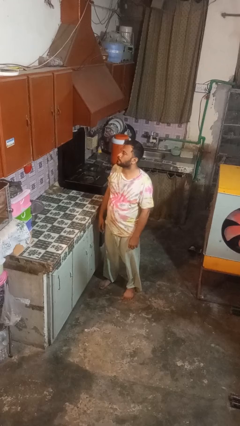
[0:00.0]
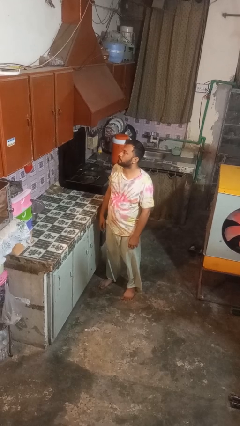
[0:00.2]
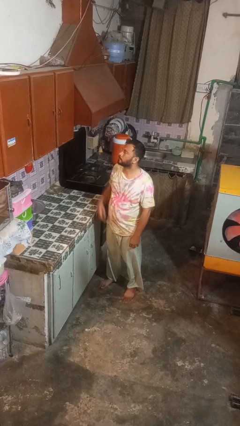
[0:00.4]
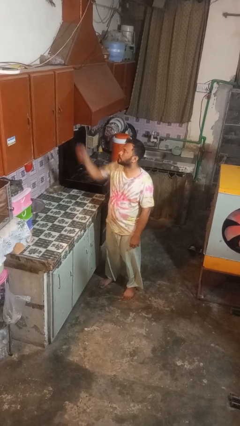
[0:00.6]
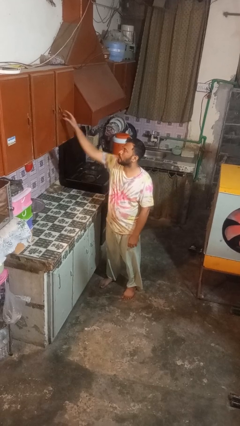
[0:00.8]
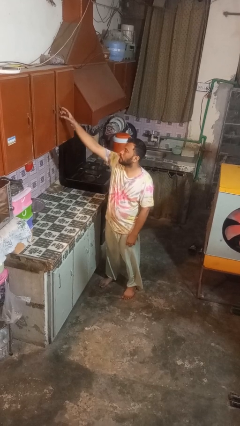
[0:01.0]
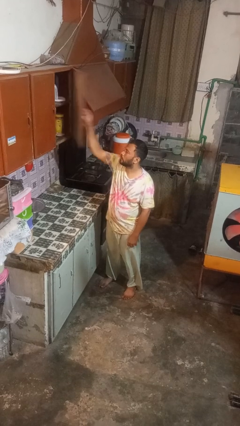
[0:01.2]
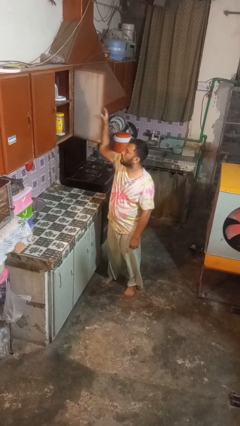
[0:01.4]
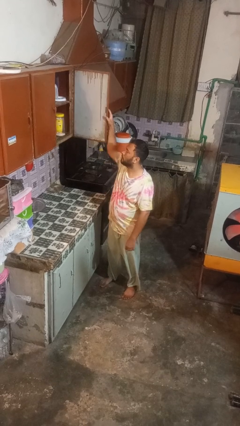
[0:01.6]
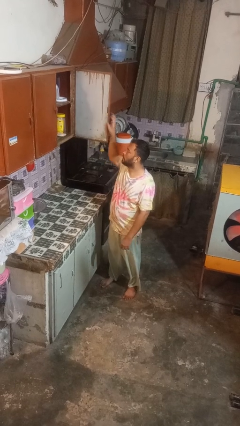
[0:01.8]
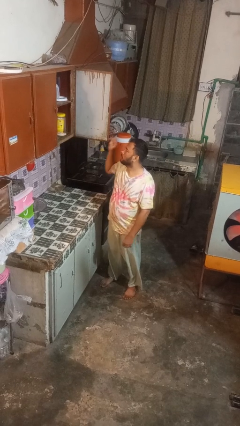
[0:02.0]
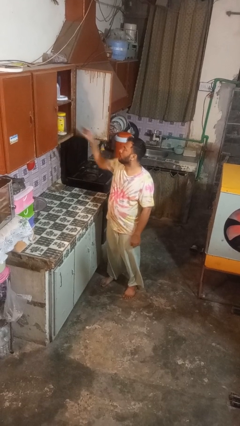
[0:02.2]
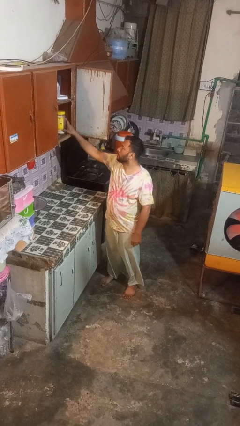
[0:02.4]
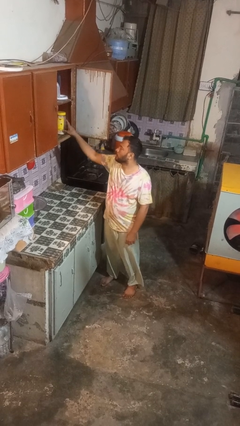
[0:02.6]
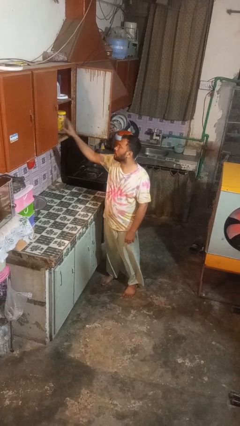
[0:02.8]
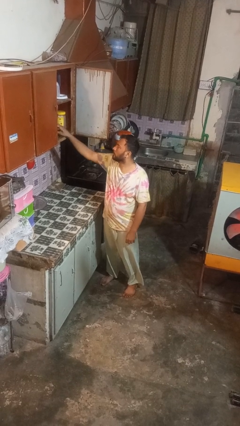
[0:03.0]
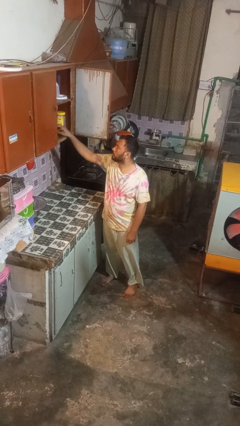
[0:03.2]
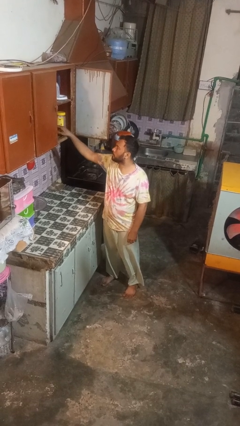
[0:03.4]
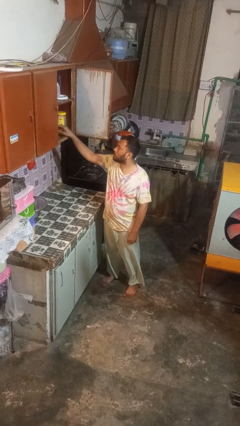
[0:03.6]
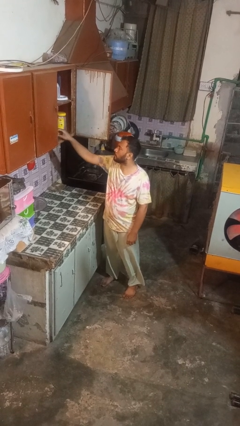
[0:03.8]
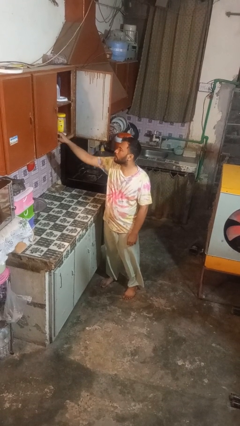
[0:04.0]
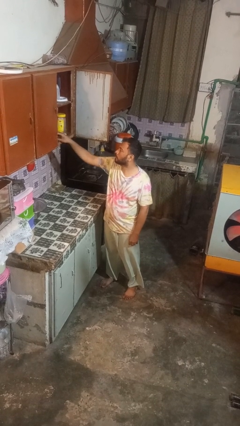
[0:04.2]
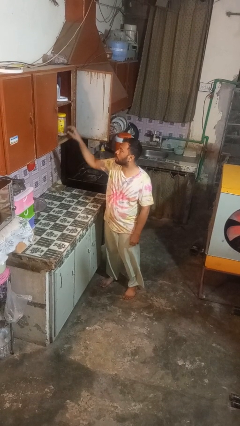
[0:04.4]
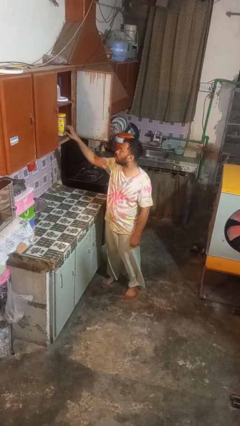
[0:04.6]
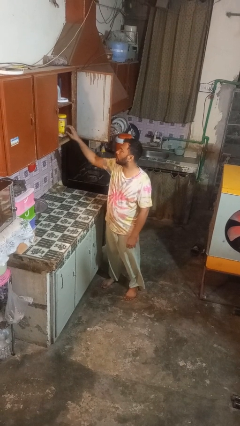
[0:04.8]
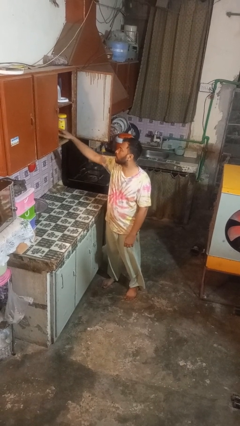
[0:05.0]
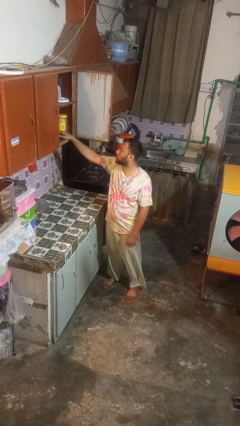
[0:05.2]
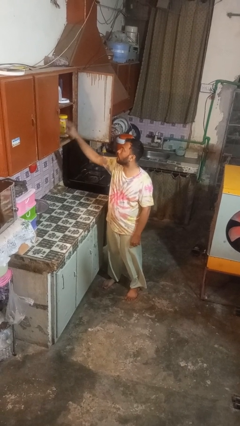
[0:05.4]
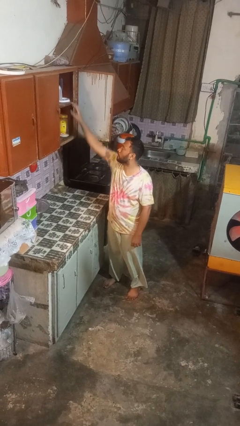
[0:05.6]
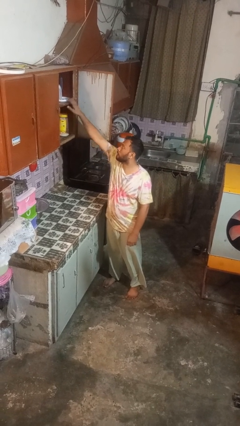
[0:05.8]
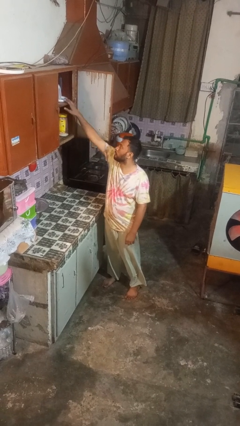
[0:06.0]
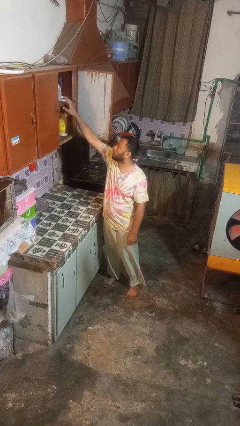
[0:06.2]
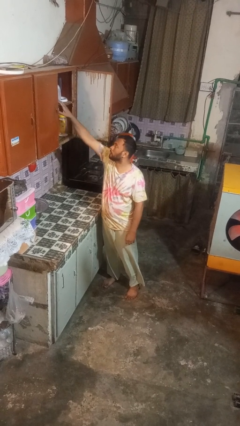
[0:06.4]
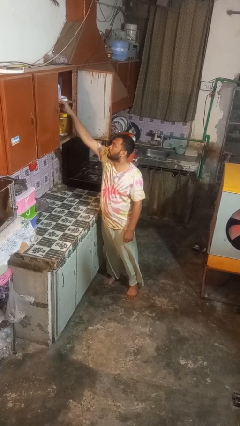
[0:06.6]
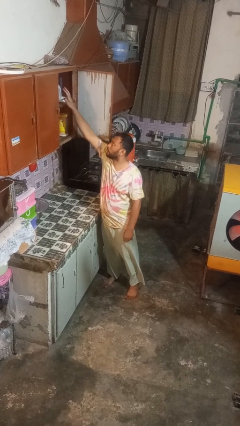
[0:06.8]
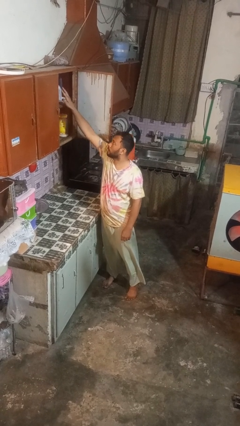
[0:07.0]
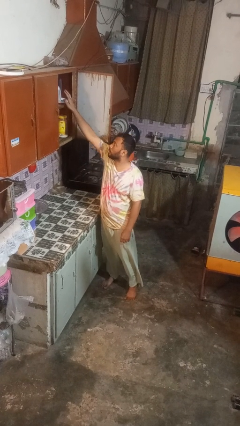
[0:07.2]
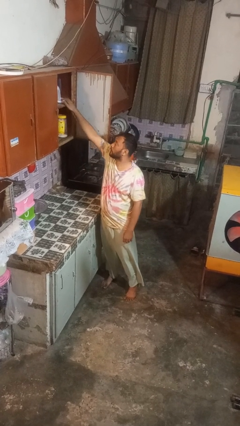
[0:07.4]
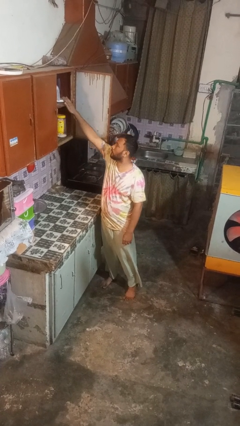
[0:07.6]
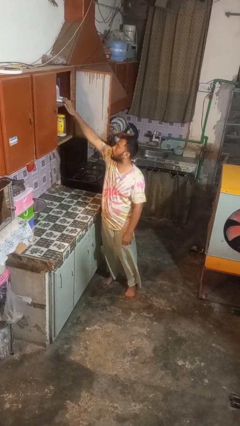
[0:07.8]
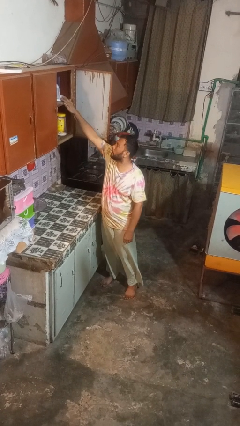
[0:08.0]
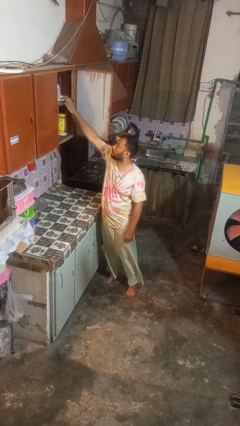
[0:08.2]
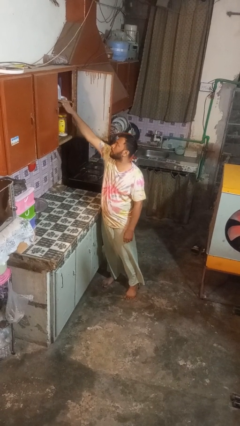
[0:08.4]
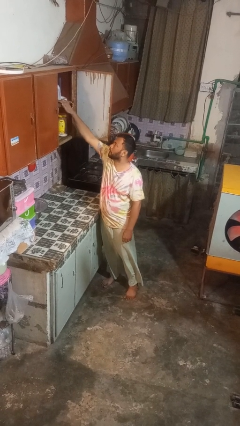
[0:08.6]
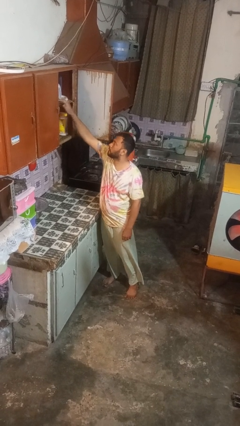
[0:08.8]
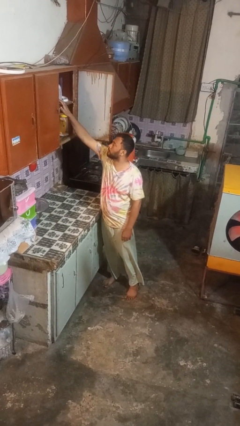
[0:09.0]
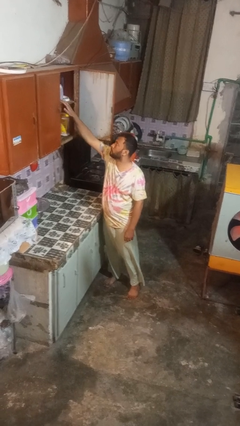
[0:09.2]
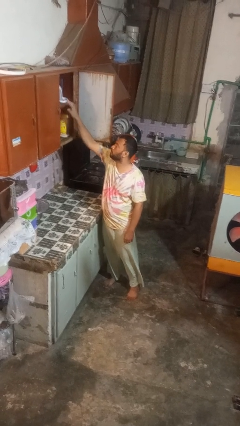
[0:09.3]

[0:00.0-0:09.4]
person opens cabinet

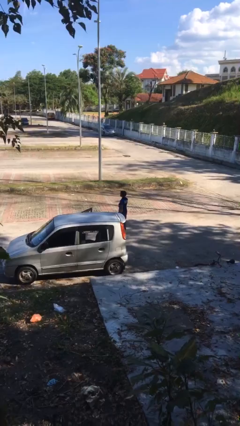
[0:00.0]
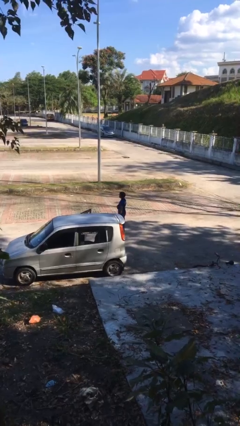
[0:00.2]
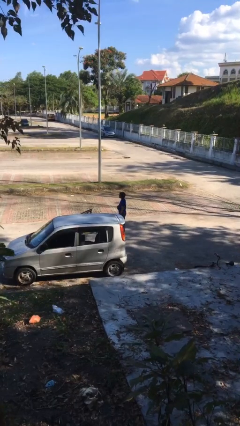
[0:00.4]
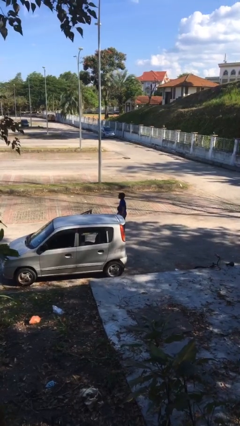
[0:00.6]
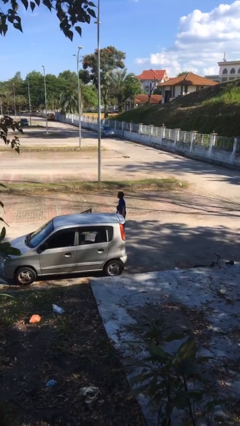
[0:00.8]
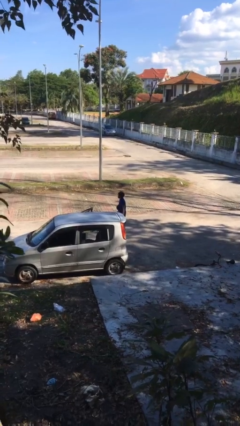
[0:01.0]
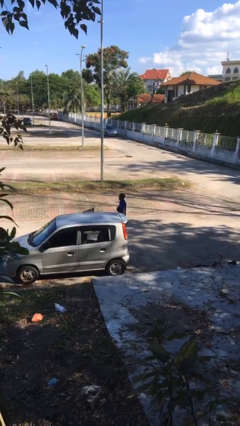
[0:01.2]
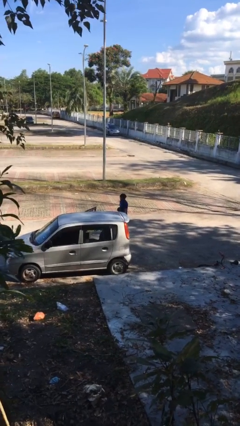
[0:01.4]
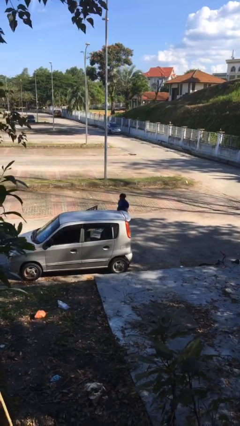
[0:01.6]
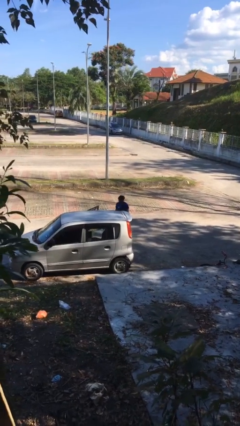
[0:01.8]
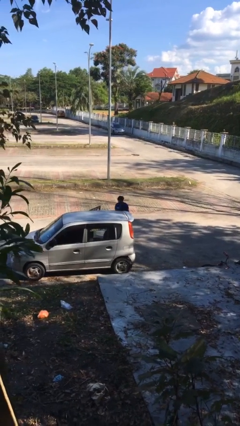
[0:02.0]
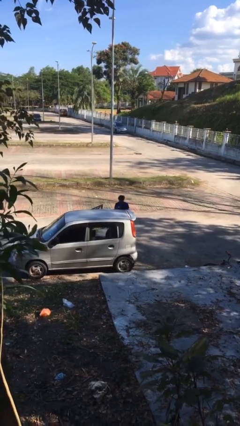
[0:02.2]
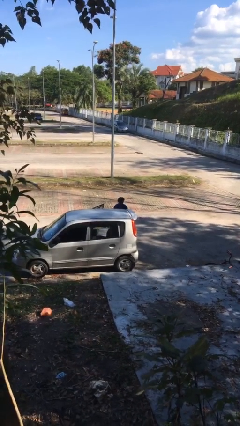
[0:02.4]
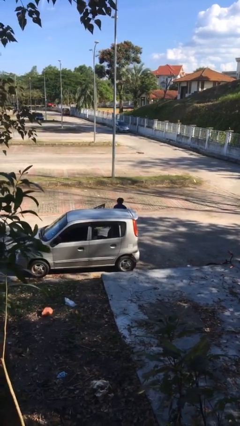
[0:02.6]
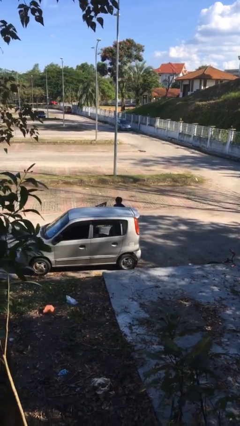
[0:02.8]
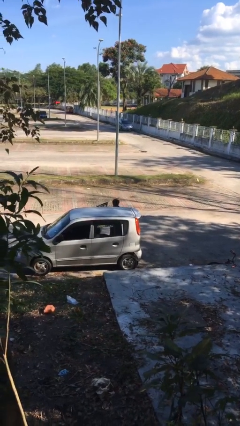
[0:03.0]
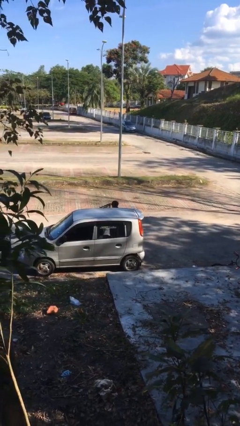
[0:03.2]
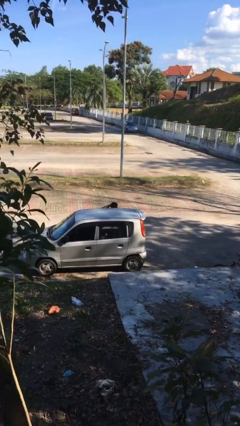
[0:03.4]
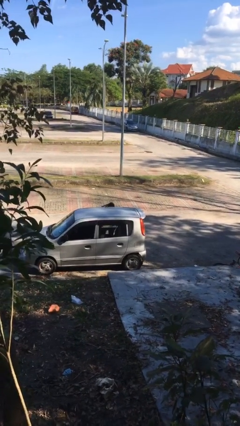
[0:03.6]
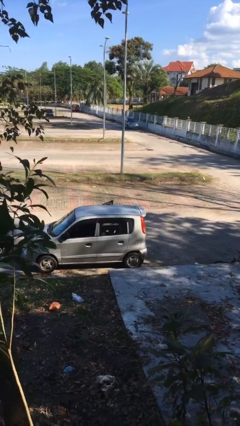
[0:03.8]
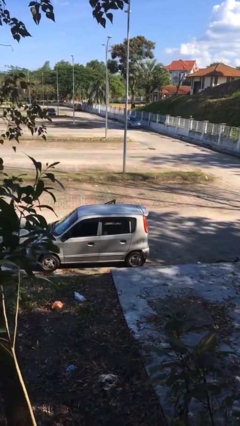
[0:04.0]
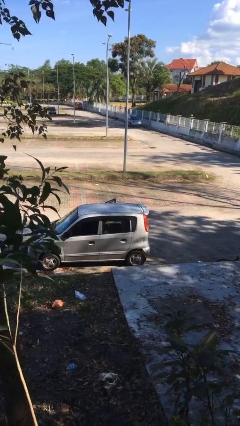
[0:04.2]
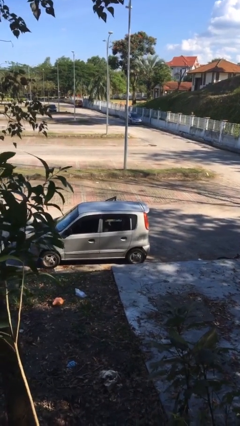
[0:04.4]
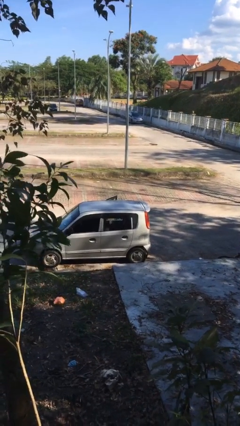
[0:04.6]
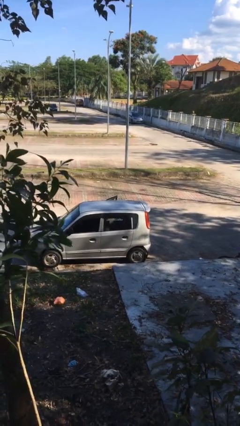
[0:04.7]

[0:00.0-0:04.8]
person enters car

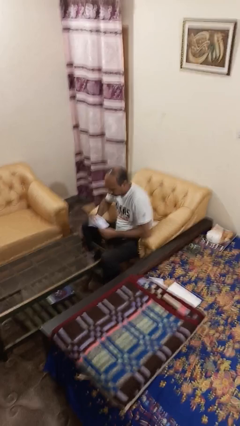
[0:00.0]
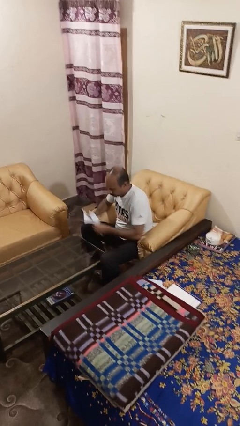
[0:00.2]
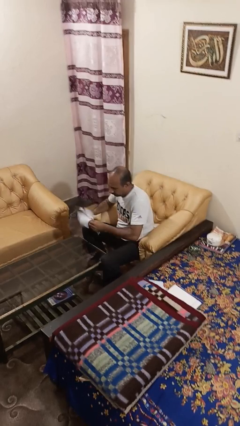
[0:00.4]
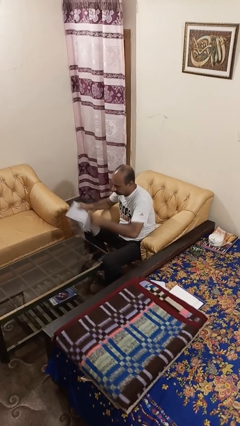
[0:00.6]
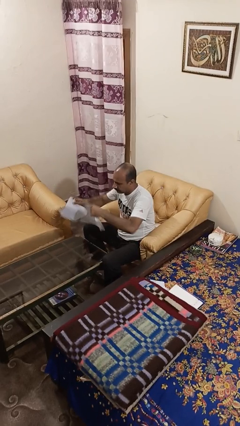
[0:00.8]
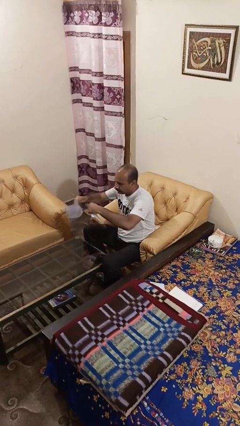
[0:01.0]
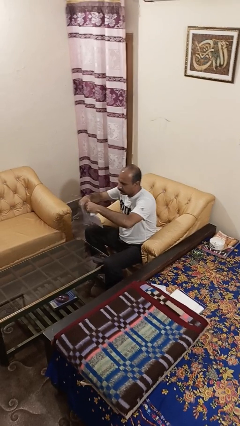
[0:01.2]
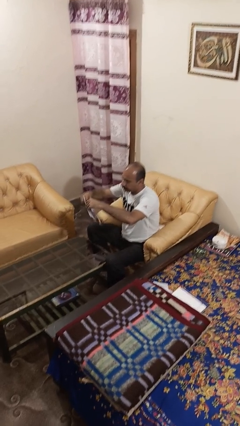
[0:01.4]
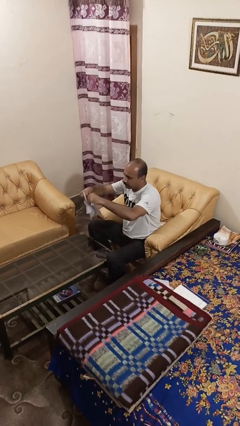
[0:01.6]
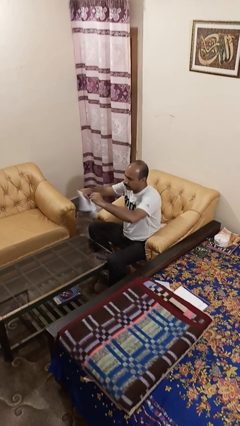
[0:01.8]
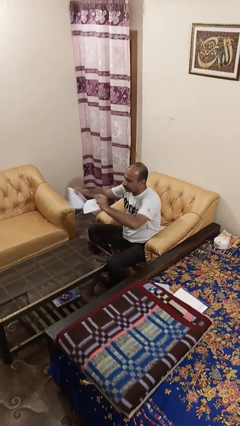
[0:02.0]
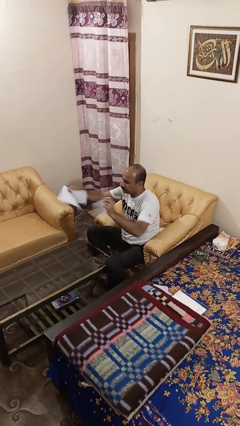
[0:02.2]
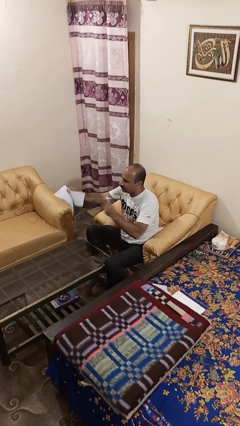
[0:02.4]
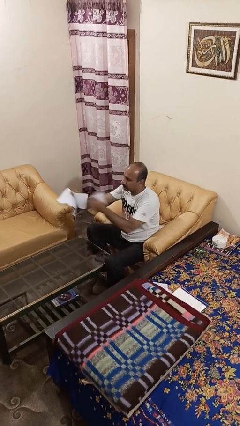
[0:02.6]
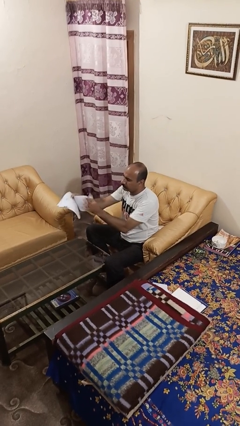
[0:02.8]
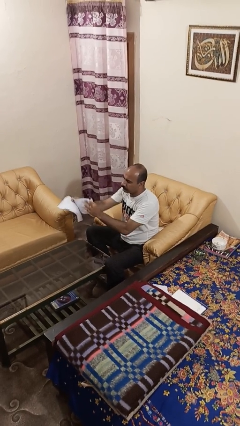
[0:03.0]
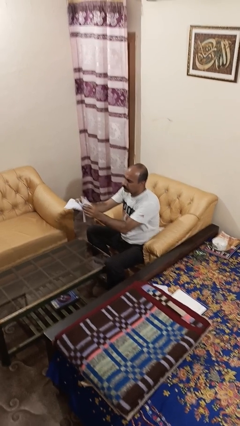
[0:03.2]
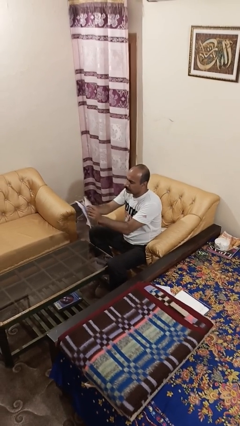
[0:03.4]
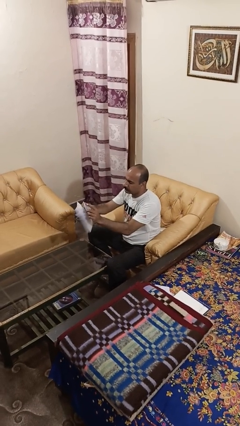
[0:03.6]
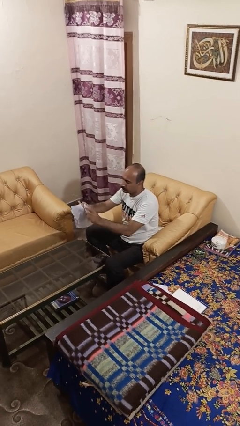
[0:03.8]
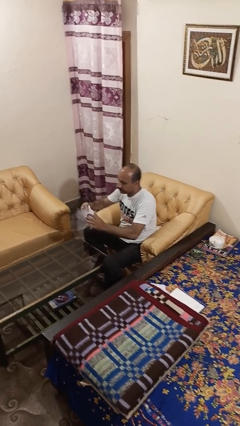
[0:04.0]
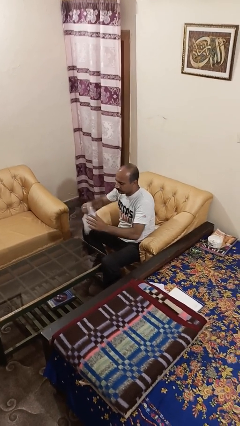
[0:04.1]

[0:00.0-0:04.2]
person tears paper
